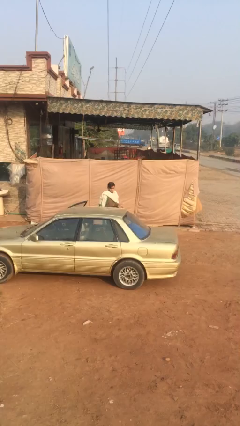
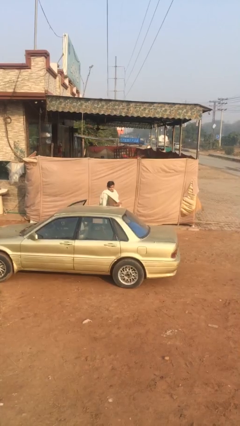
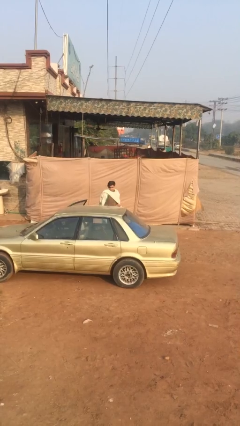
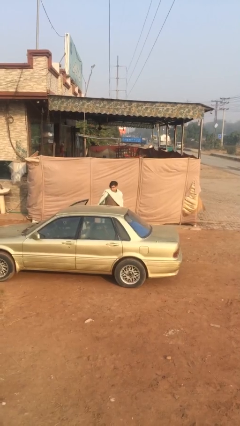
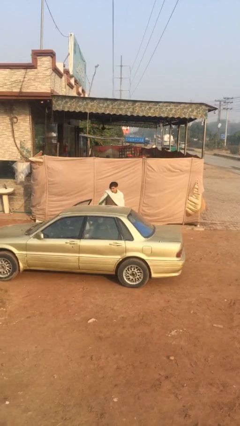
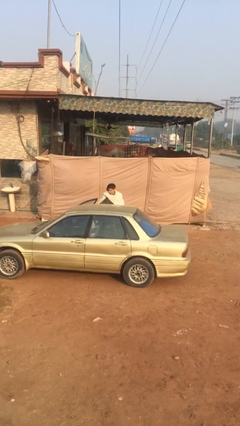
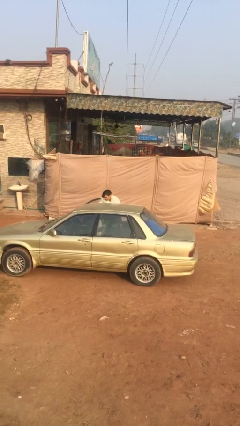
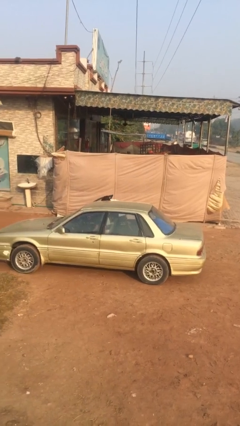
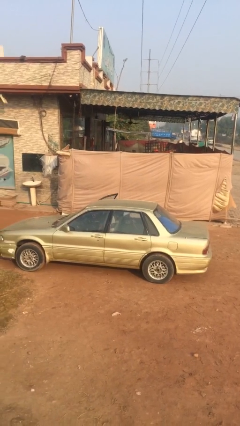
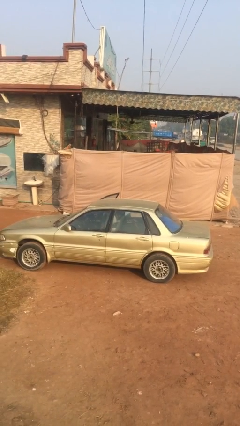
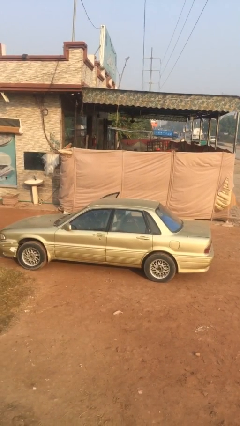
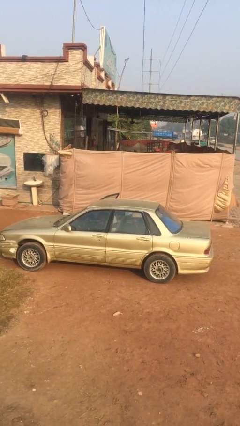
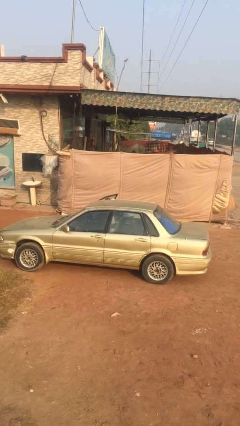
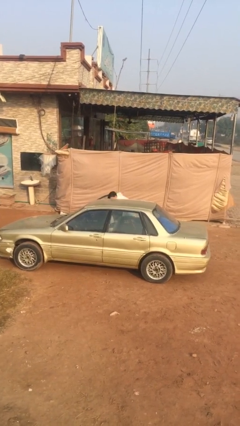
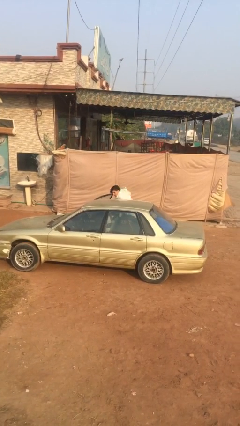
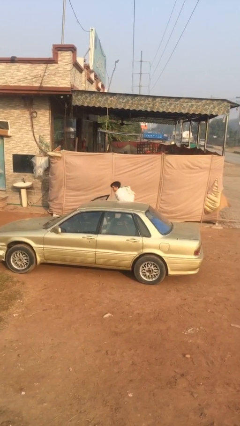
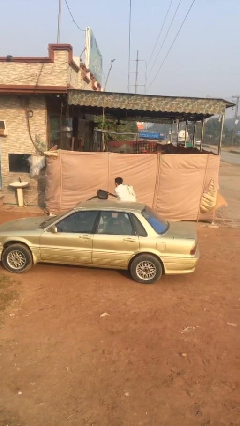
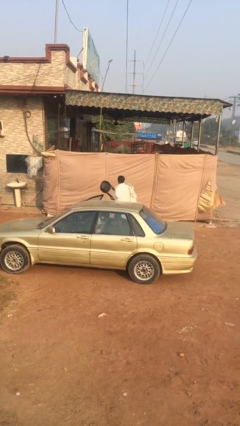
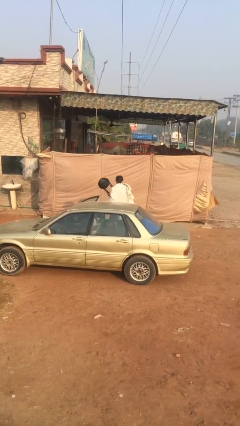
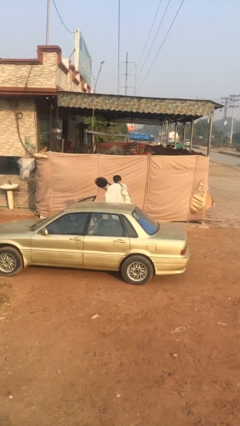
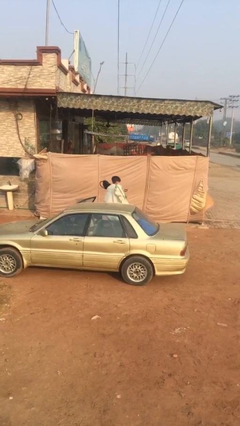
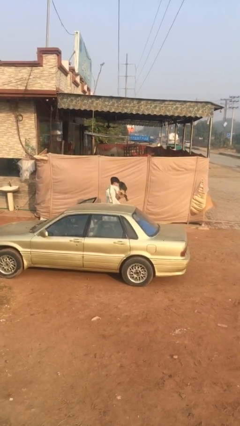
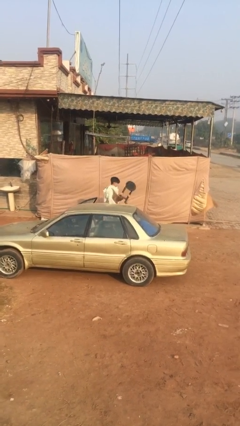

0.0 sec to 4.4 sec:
person unloads car

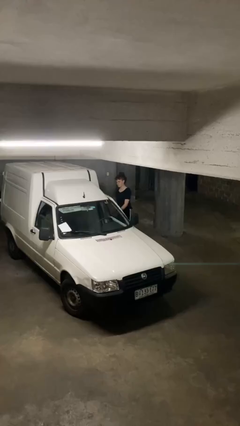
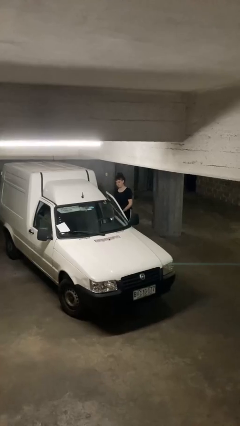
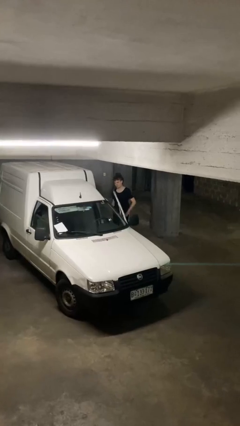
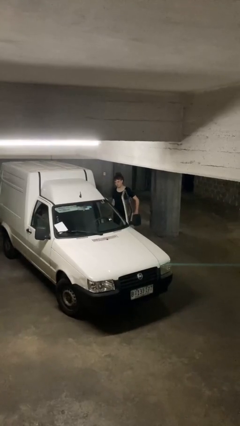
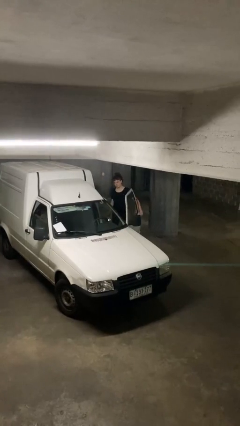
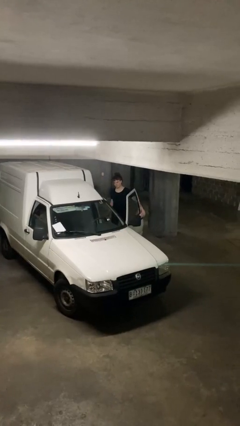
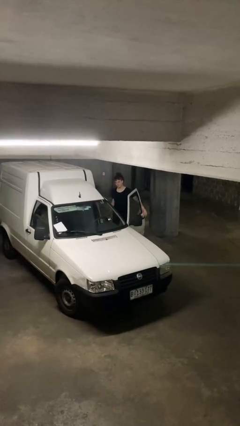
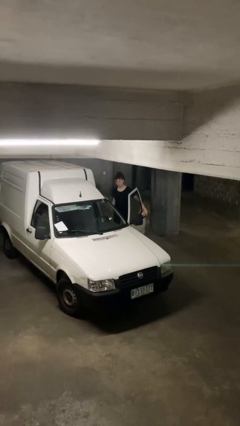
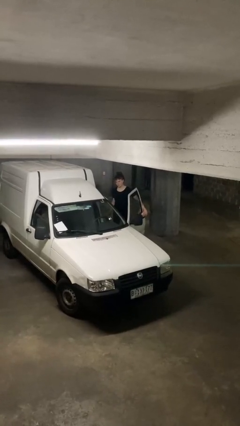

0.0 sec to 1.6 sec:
person opens car door

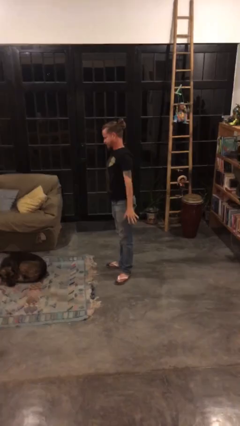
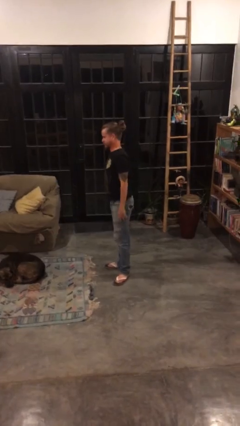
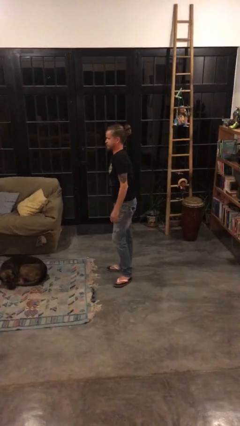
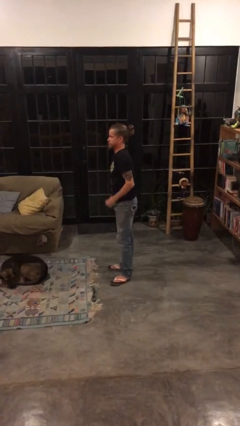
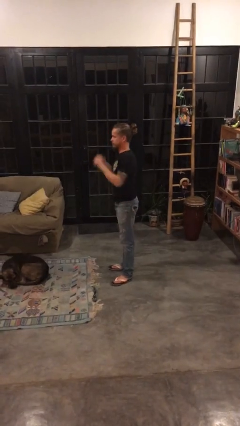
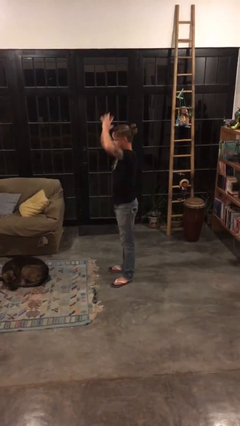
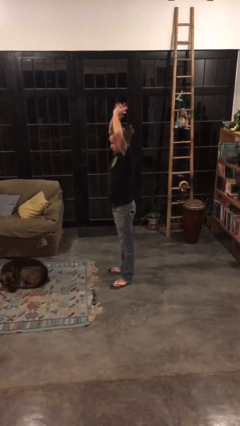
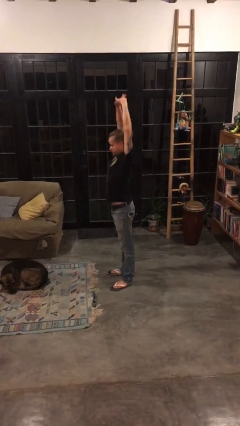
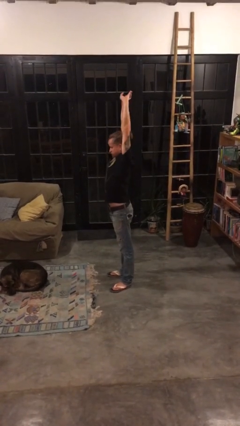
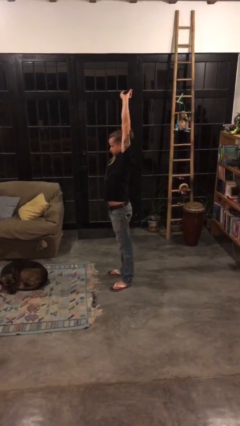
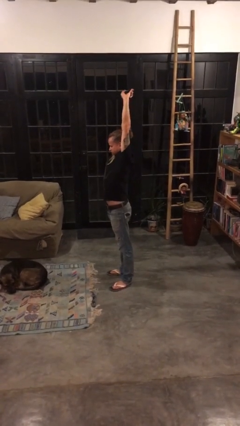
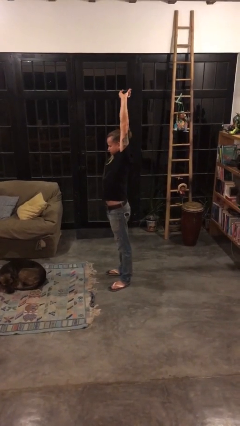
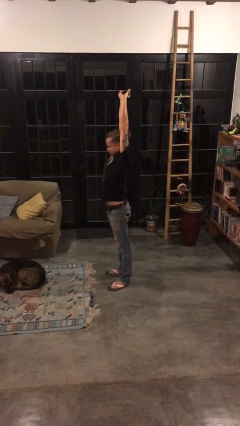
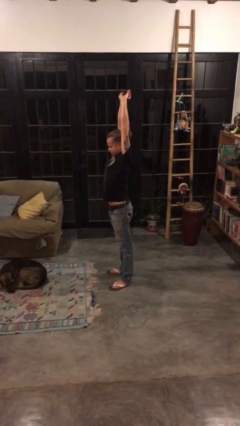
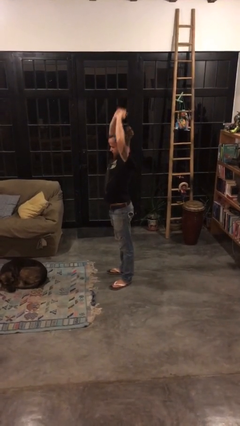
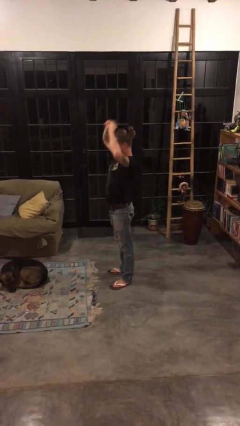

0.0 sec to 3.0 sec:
person stretches arms over head

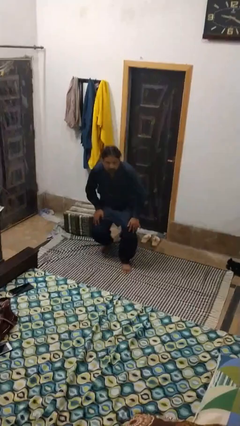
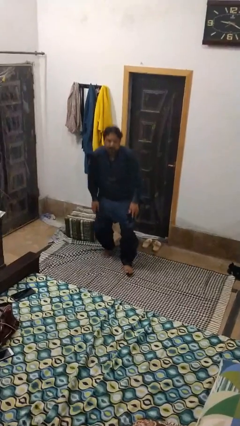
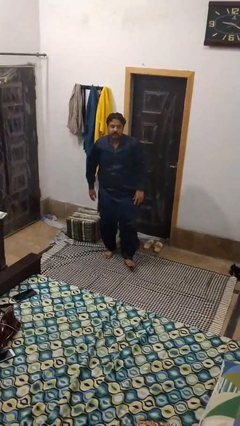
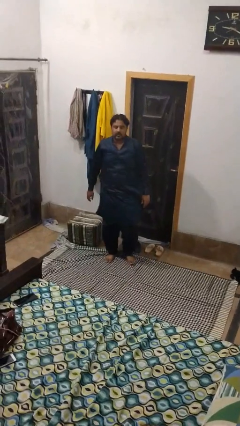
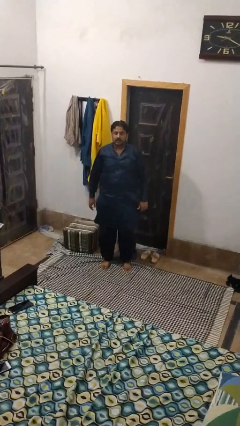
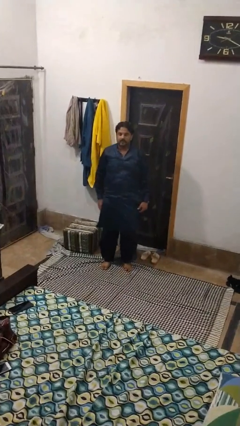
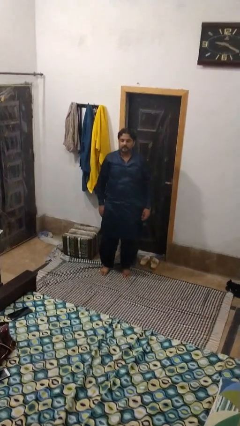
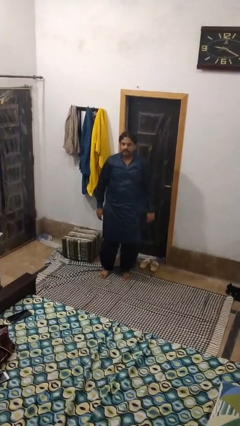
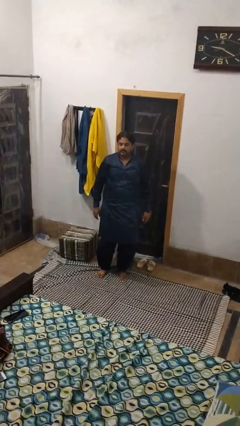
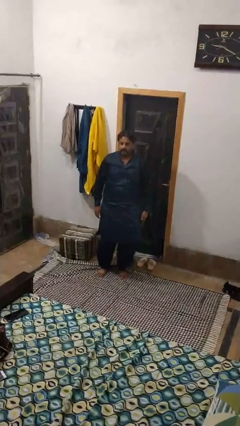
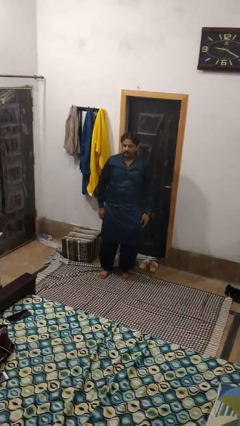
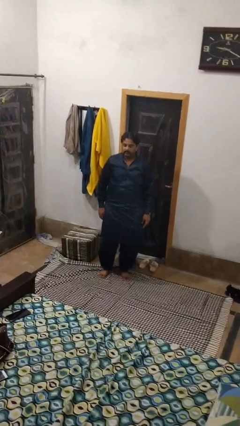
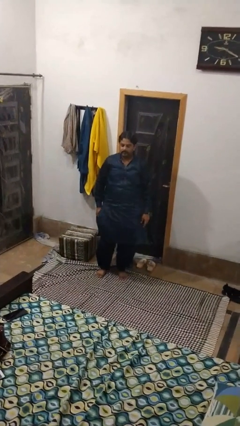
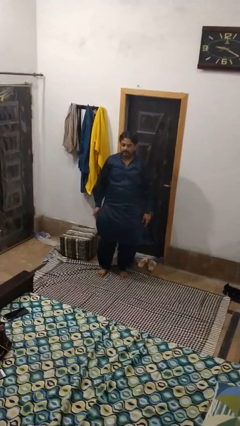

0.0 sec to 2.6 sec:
person stands up from floor

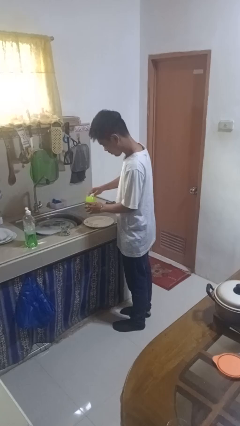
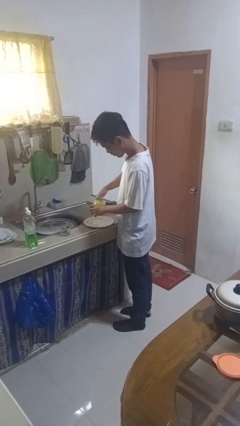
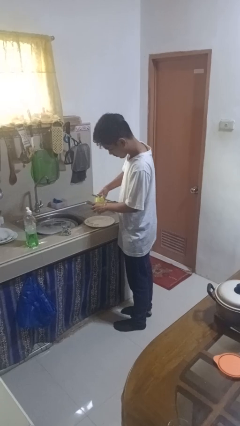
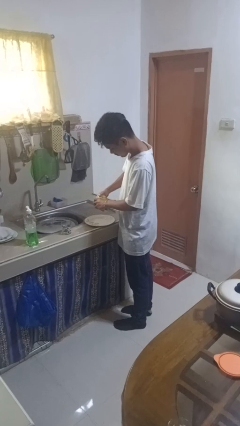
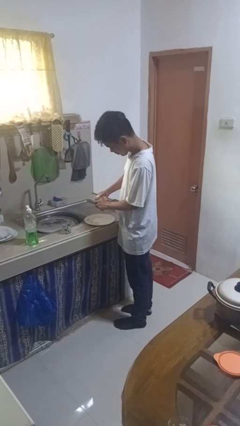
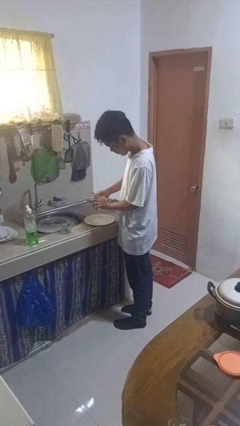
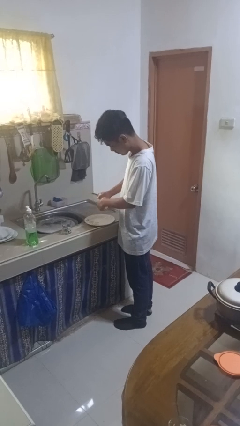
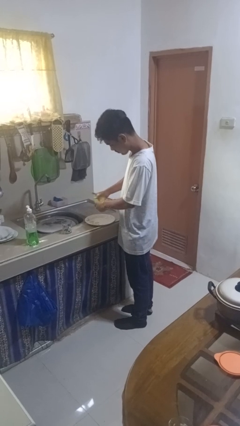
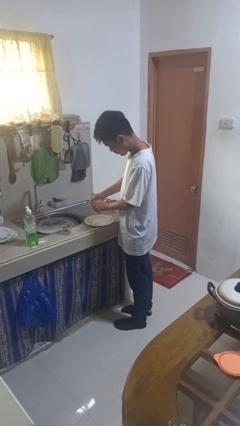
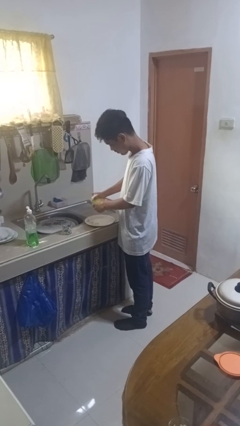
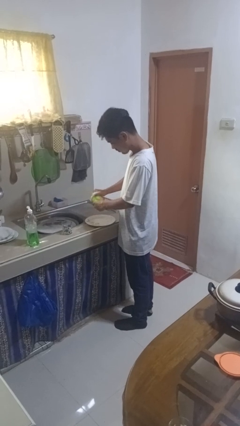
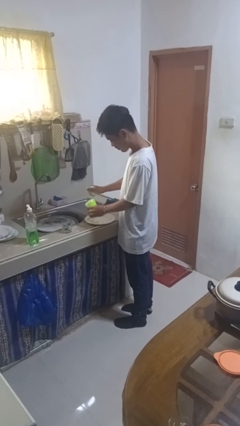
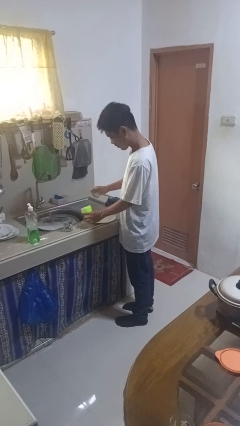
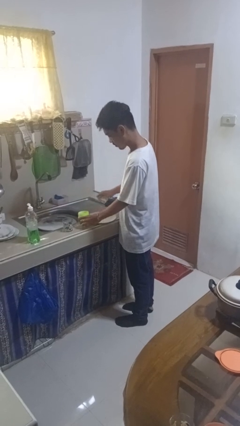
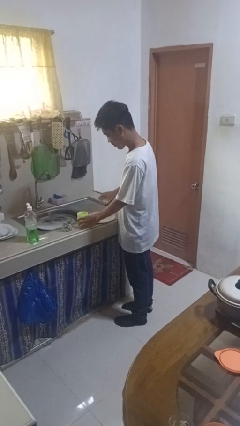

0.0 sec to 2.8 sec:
person washes dish

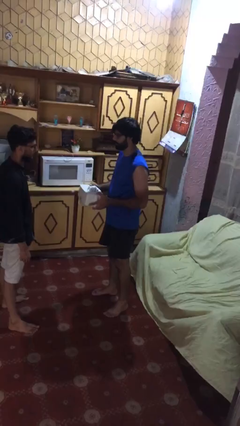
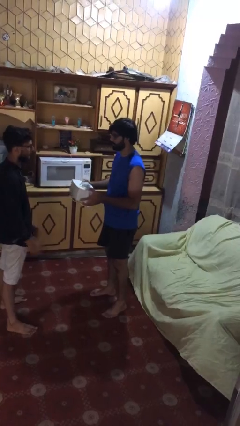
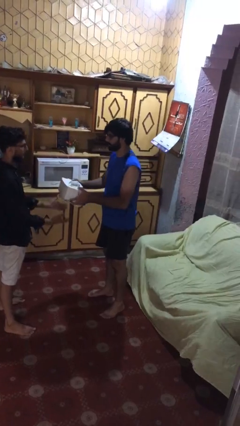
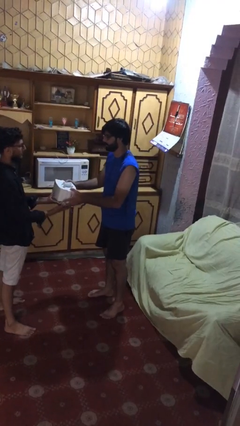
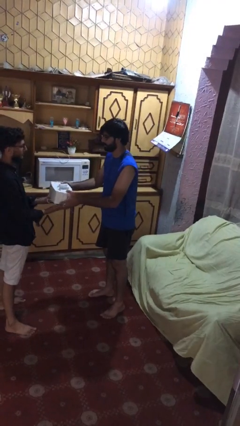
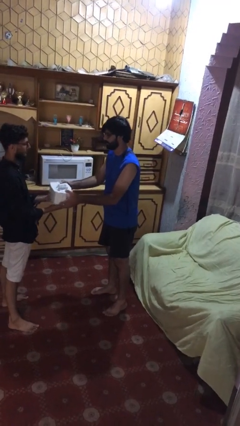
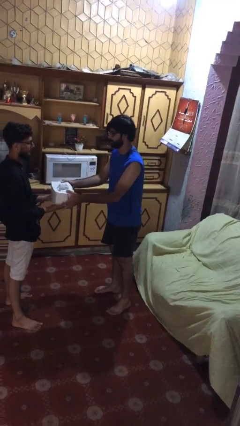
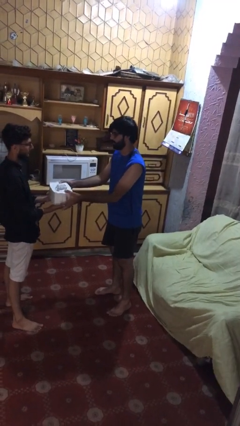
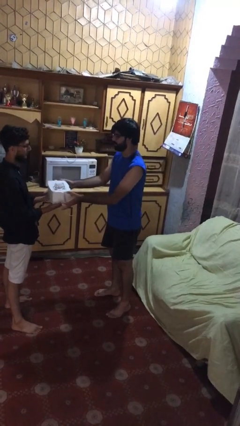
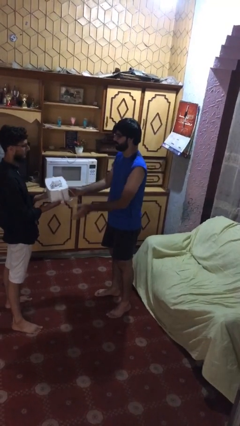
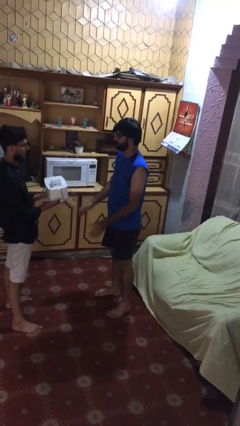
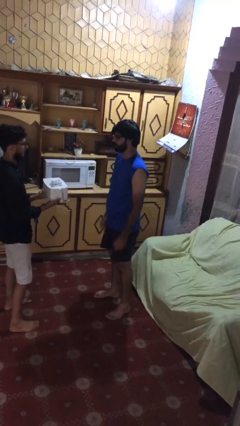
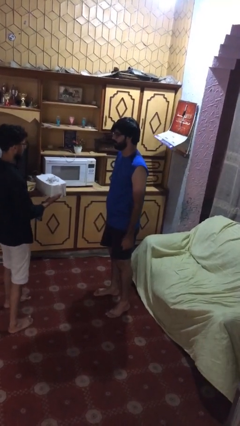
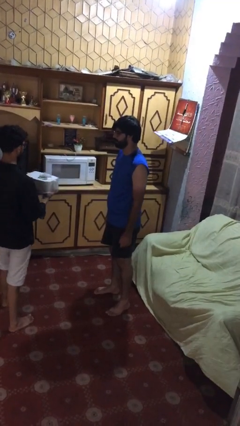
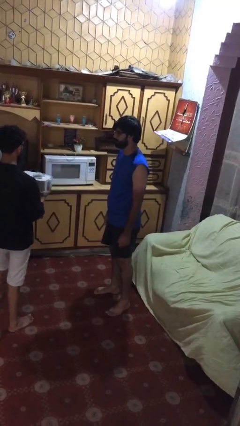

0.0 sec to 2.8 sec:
person transfers object to person
